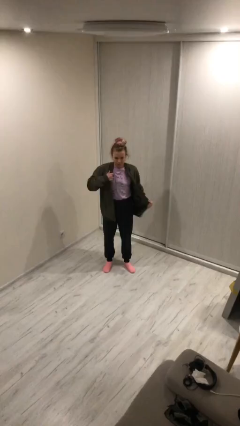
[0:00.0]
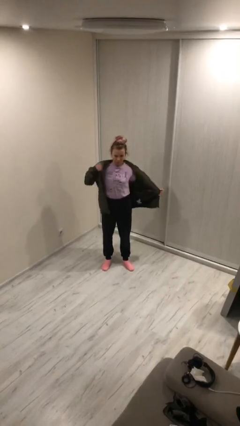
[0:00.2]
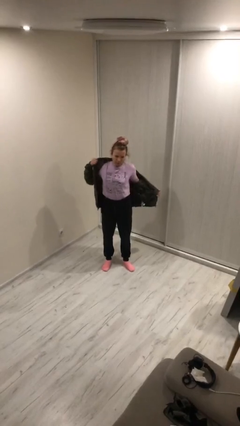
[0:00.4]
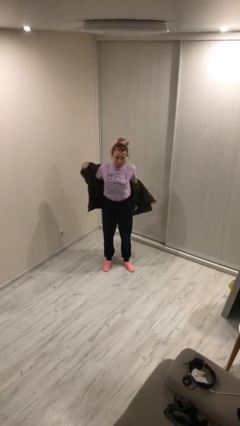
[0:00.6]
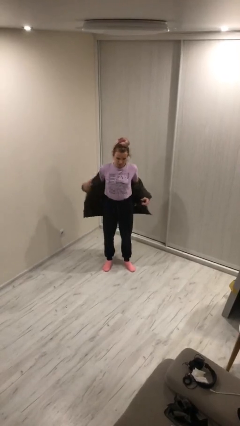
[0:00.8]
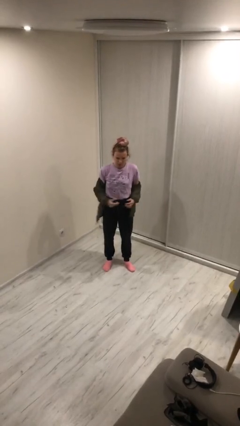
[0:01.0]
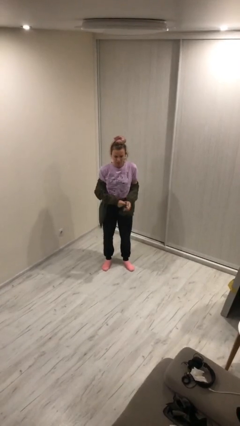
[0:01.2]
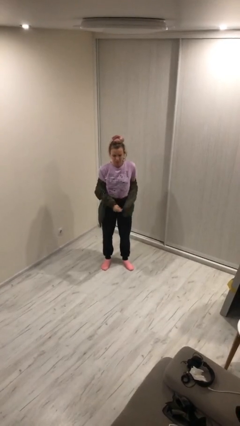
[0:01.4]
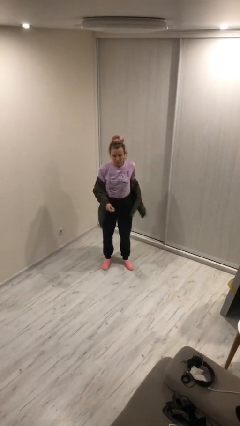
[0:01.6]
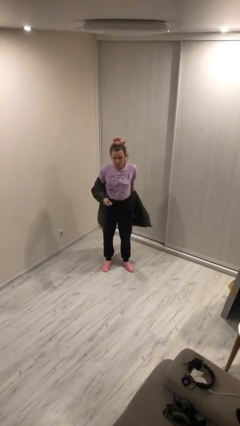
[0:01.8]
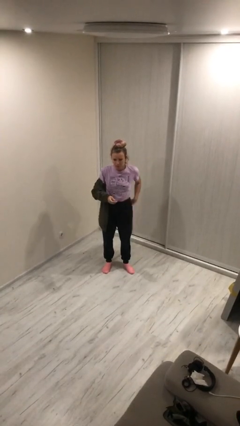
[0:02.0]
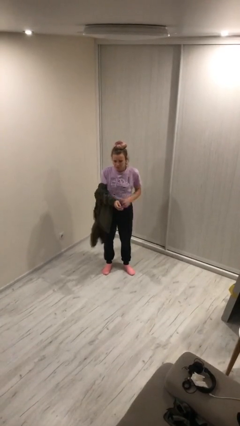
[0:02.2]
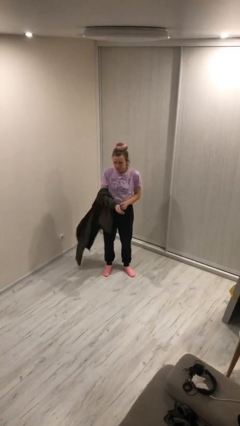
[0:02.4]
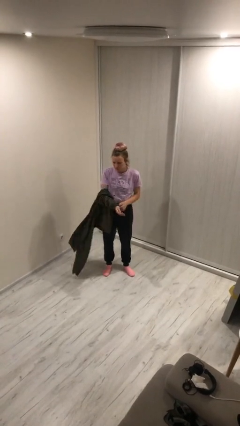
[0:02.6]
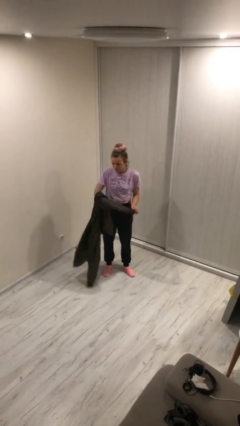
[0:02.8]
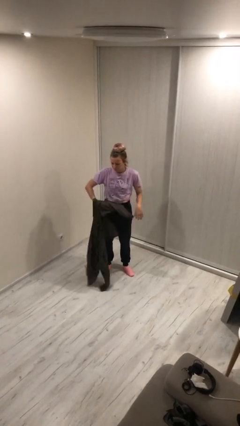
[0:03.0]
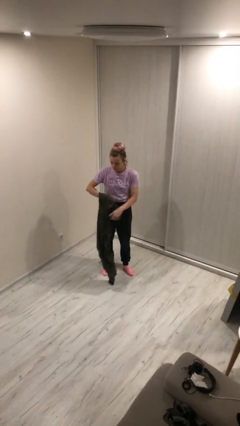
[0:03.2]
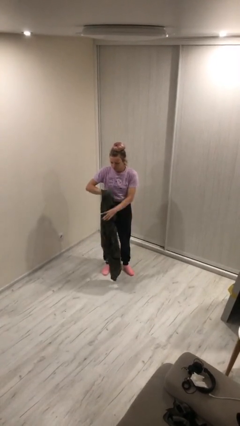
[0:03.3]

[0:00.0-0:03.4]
person takes off jacket

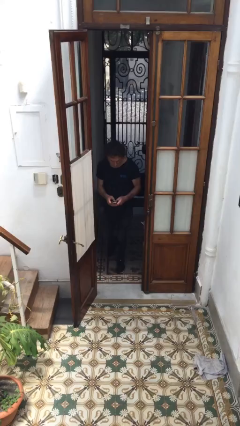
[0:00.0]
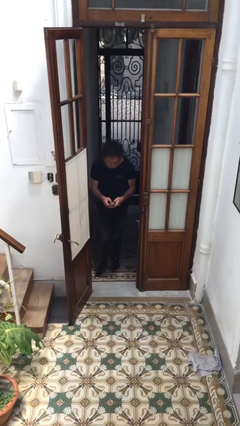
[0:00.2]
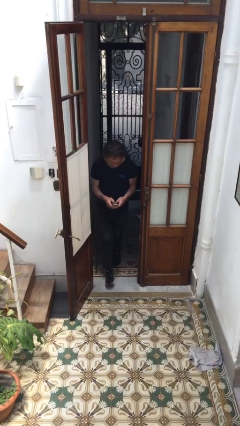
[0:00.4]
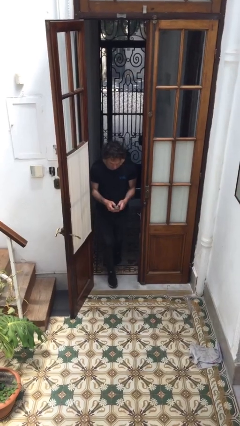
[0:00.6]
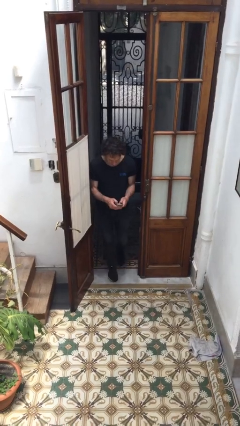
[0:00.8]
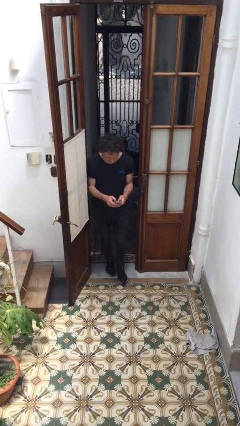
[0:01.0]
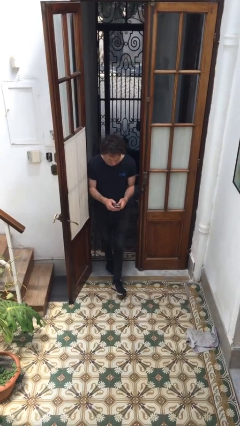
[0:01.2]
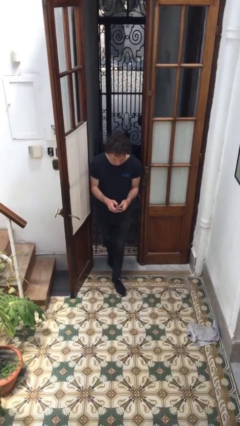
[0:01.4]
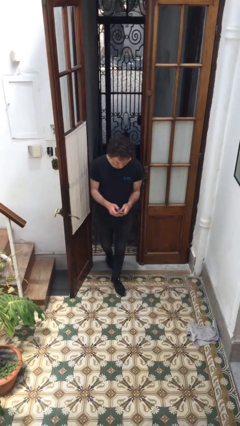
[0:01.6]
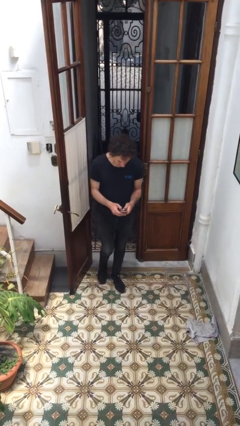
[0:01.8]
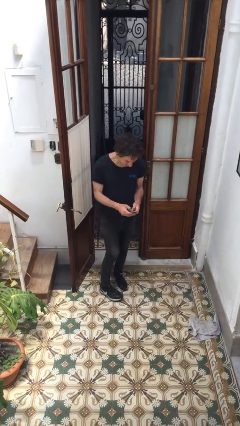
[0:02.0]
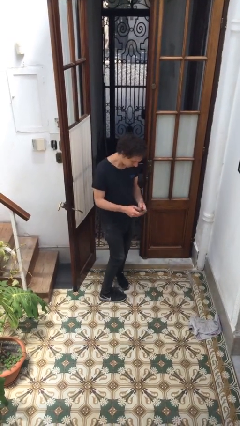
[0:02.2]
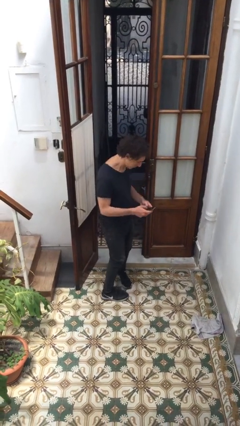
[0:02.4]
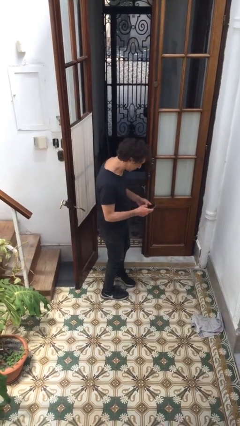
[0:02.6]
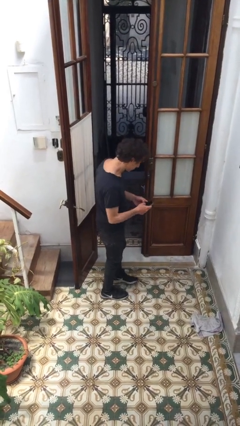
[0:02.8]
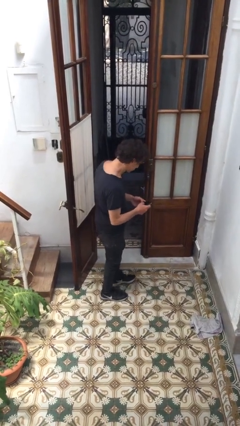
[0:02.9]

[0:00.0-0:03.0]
person enters scene through structure

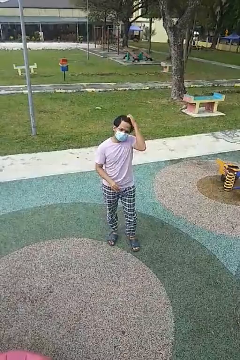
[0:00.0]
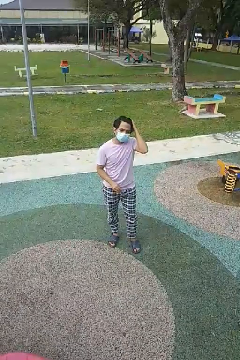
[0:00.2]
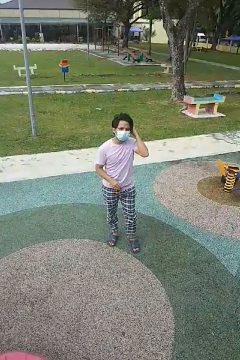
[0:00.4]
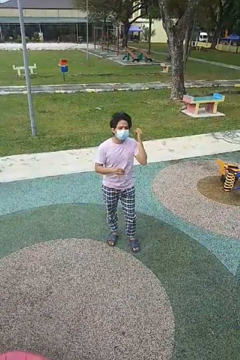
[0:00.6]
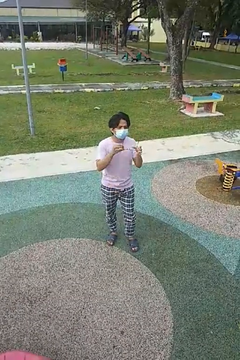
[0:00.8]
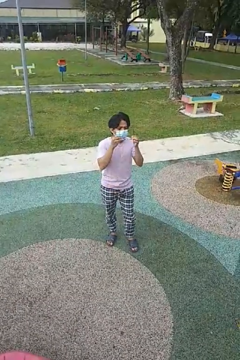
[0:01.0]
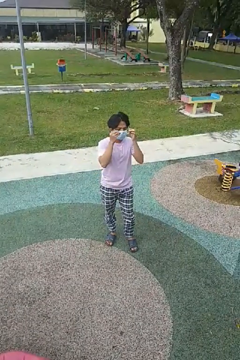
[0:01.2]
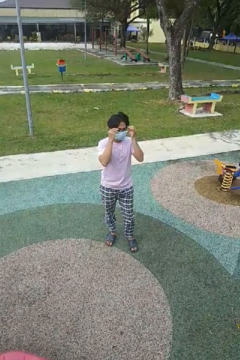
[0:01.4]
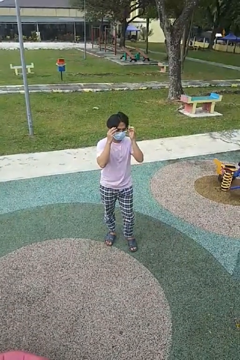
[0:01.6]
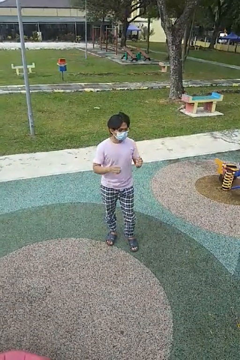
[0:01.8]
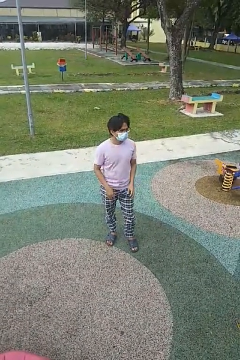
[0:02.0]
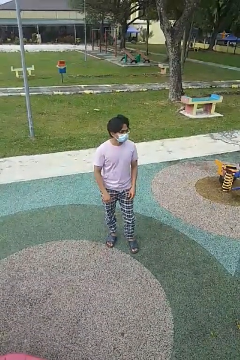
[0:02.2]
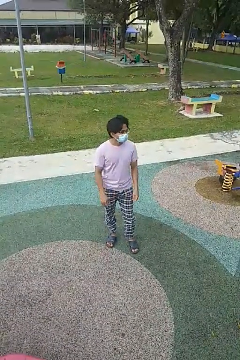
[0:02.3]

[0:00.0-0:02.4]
person puts on glasses

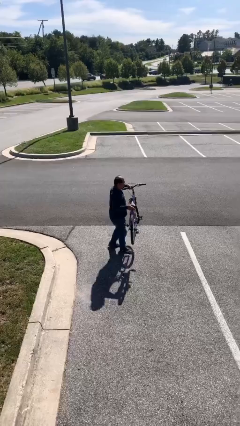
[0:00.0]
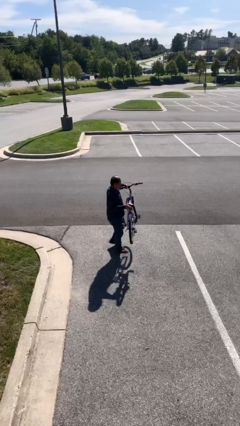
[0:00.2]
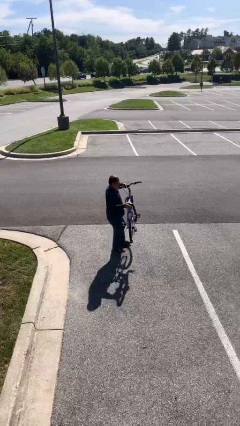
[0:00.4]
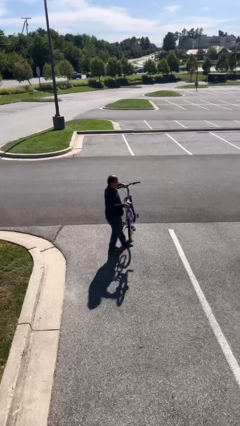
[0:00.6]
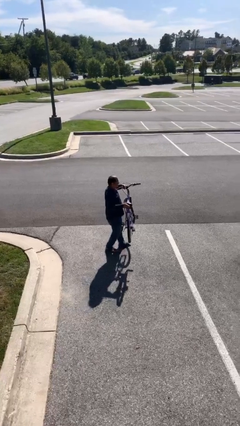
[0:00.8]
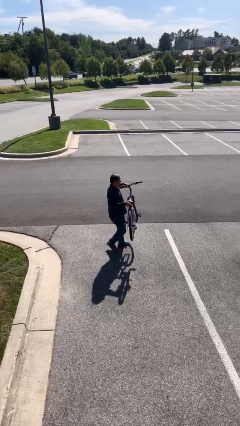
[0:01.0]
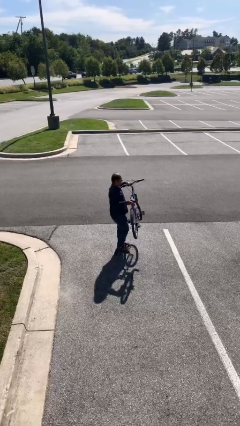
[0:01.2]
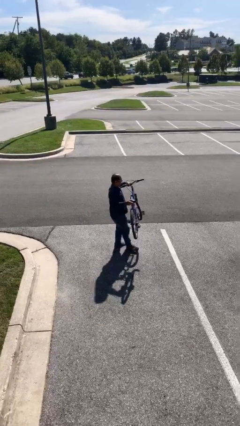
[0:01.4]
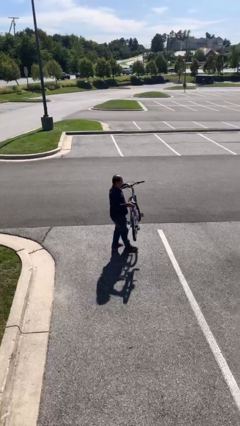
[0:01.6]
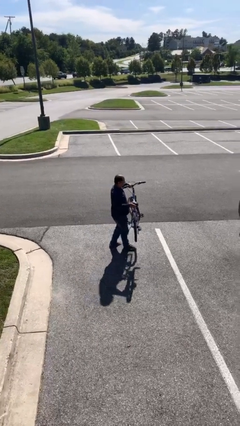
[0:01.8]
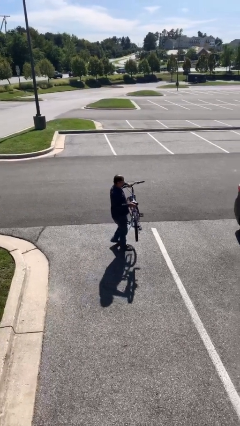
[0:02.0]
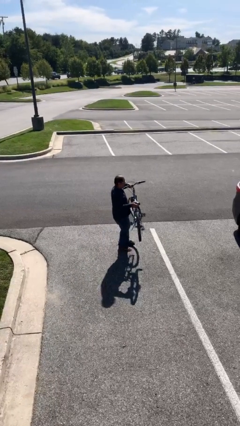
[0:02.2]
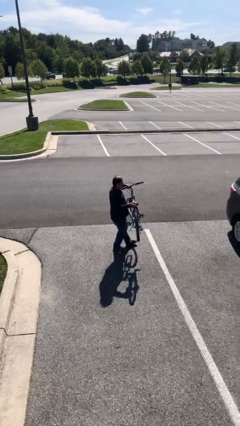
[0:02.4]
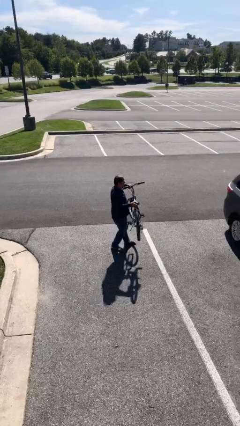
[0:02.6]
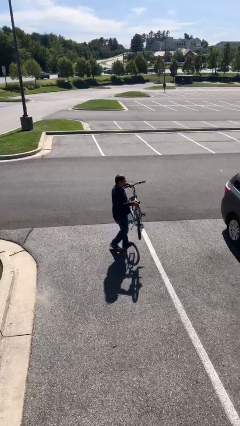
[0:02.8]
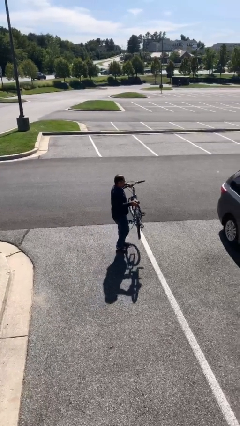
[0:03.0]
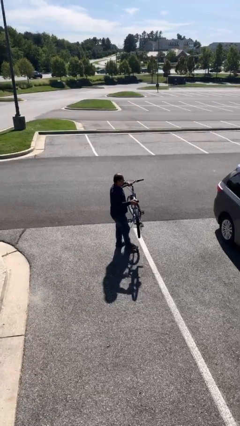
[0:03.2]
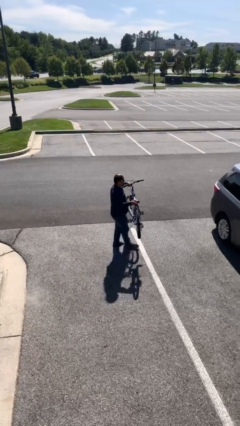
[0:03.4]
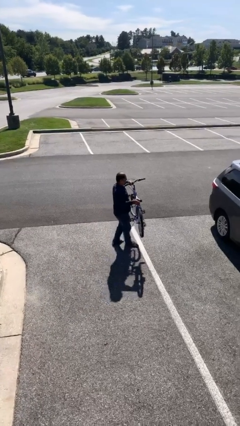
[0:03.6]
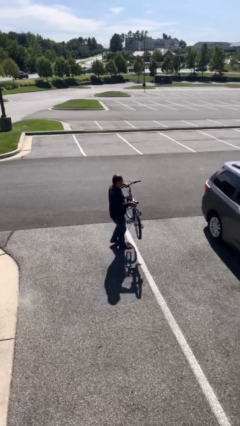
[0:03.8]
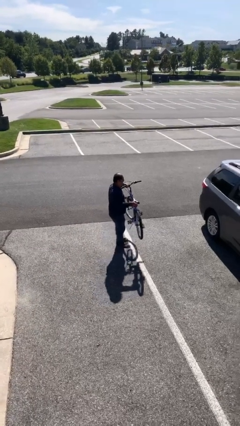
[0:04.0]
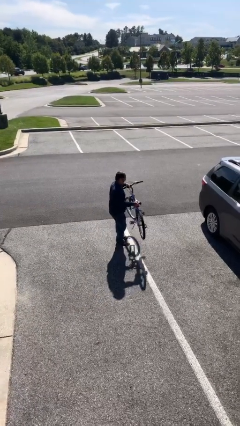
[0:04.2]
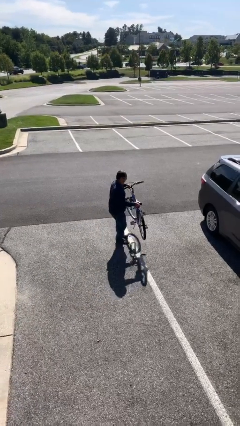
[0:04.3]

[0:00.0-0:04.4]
person carries heavy object

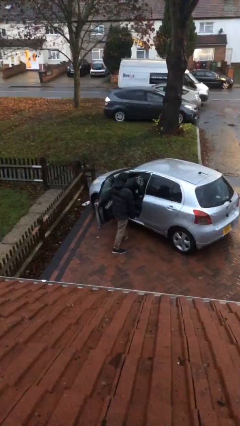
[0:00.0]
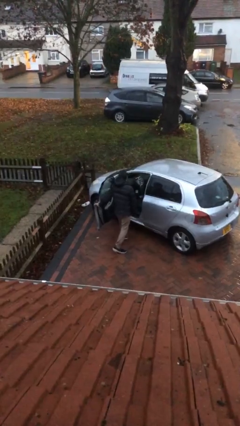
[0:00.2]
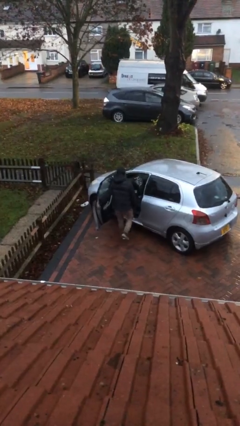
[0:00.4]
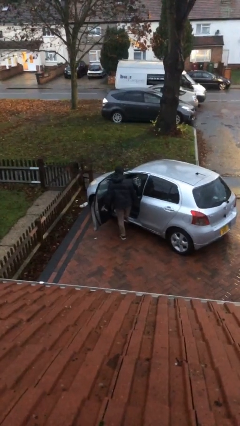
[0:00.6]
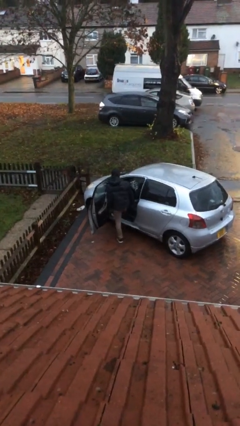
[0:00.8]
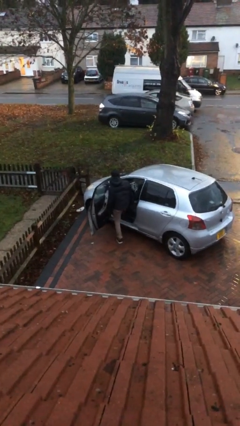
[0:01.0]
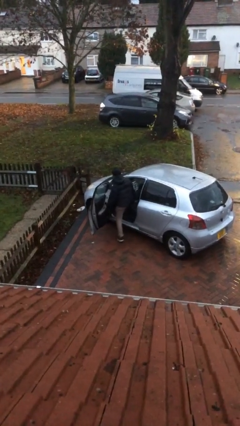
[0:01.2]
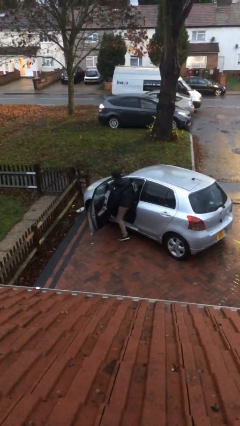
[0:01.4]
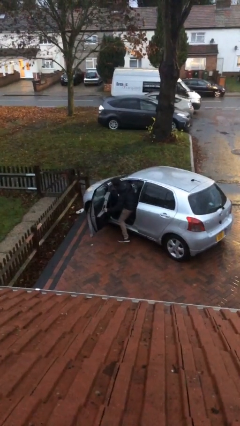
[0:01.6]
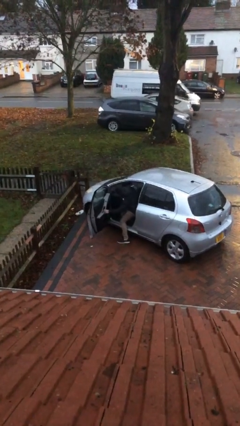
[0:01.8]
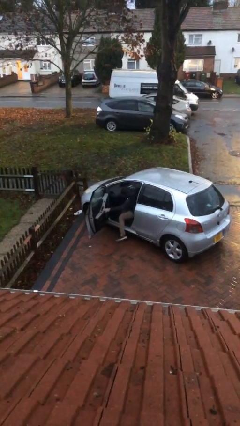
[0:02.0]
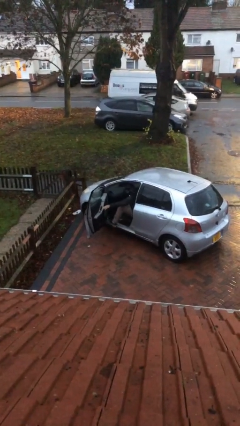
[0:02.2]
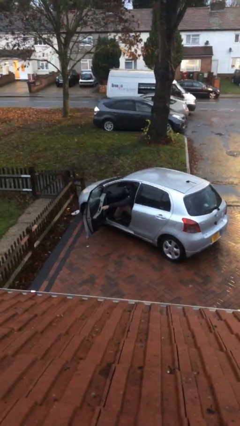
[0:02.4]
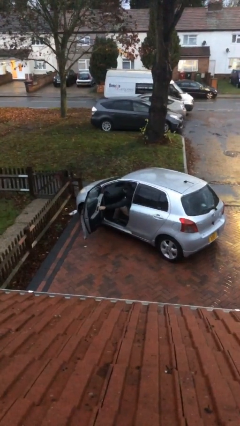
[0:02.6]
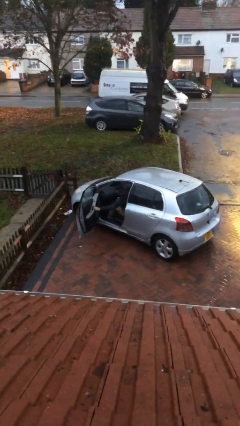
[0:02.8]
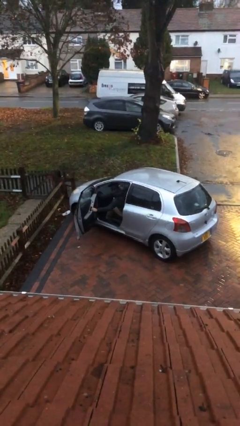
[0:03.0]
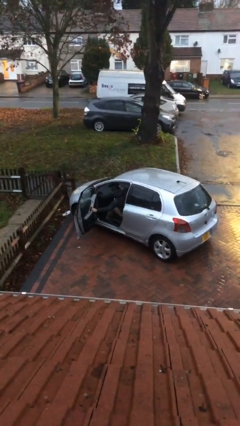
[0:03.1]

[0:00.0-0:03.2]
person enters car

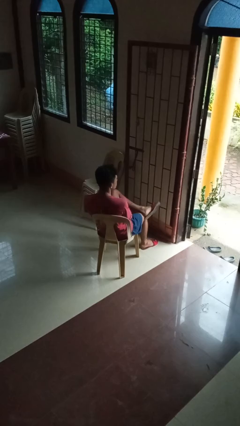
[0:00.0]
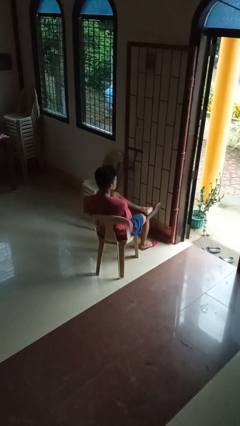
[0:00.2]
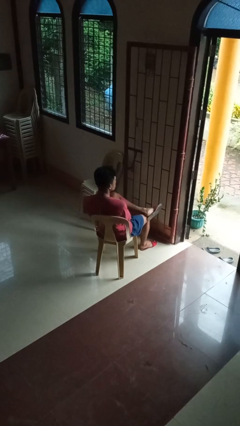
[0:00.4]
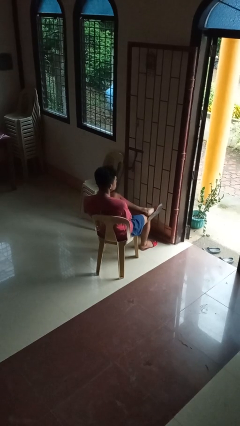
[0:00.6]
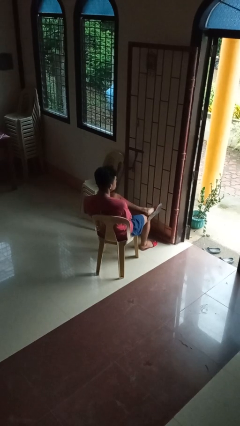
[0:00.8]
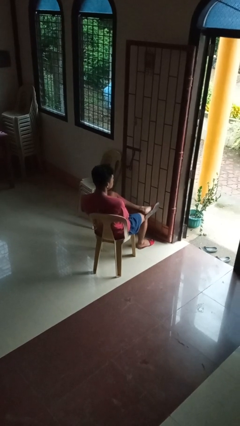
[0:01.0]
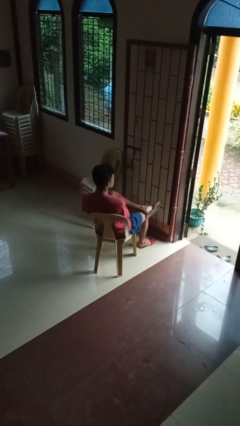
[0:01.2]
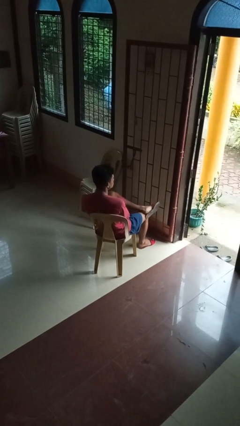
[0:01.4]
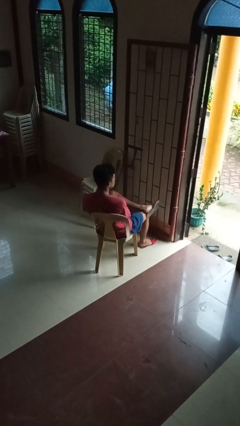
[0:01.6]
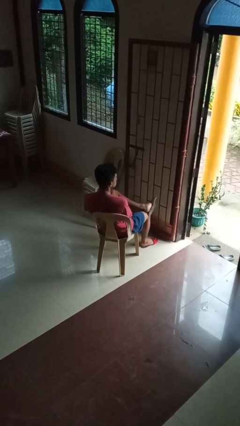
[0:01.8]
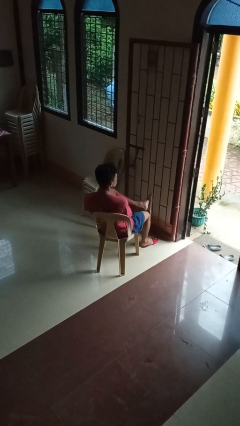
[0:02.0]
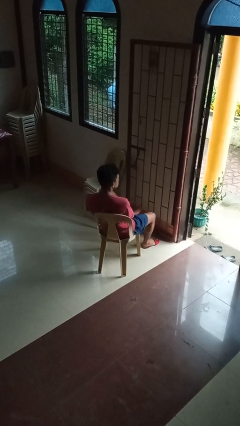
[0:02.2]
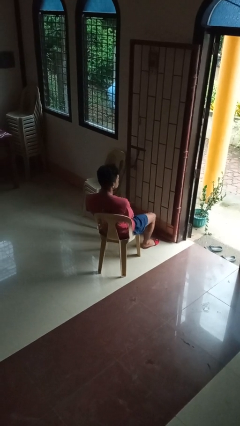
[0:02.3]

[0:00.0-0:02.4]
person crosses legs
